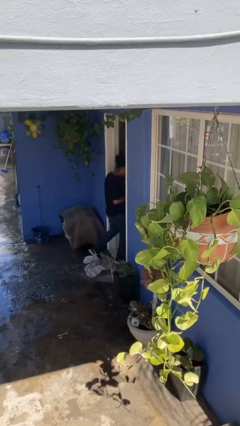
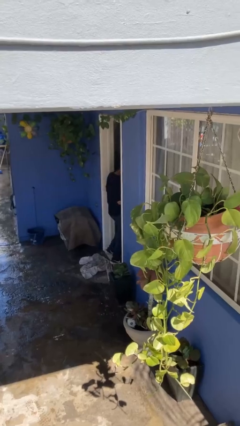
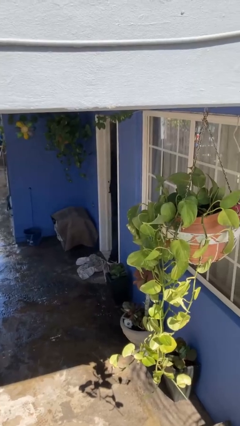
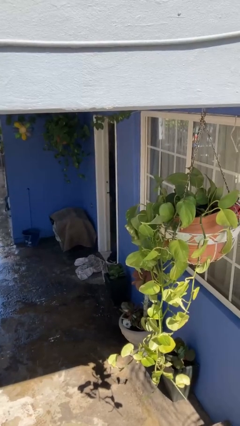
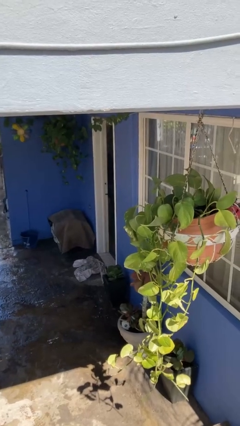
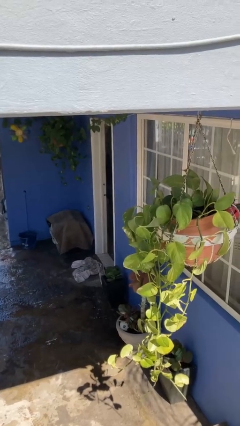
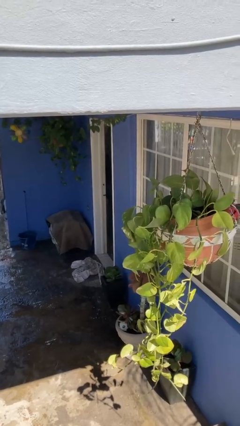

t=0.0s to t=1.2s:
person exits scene through structure

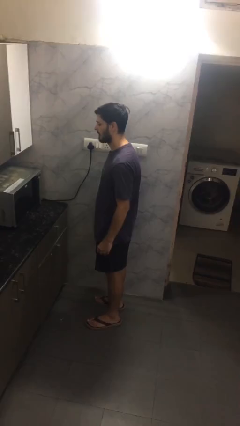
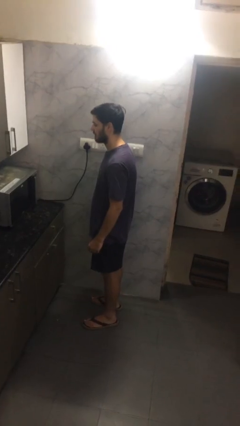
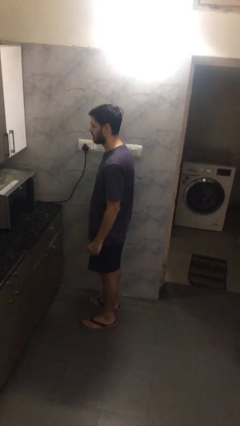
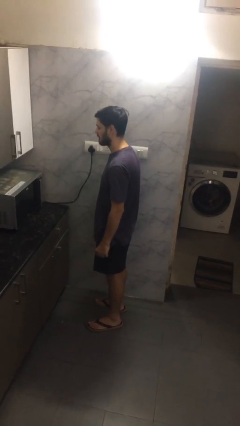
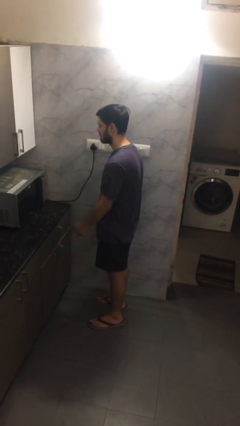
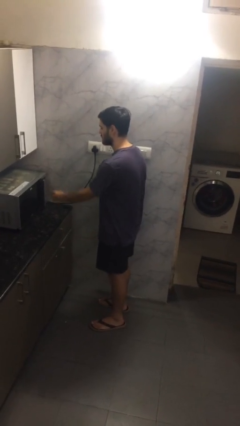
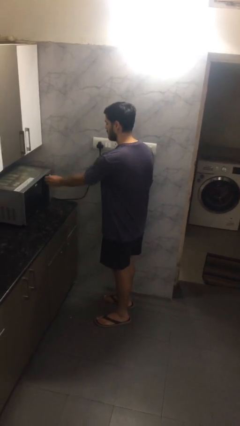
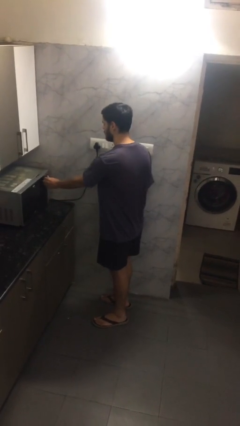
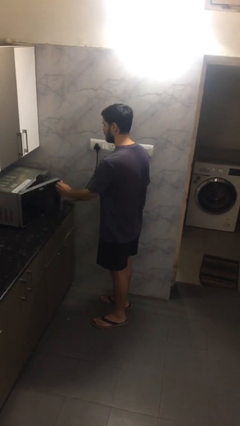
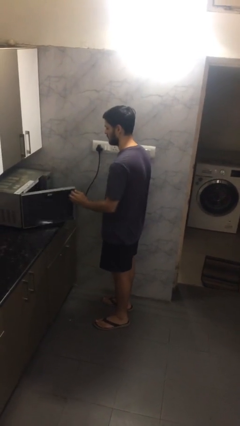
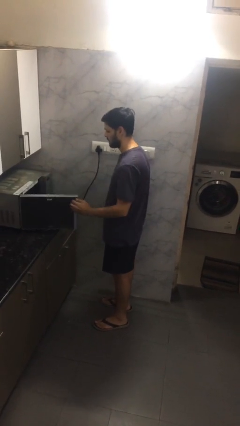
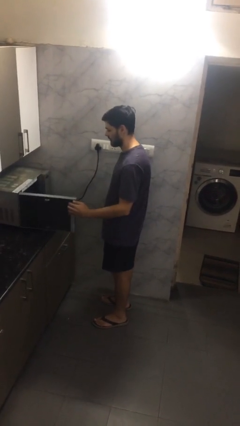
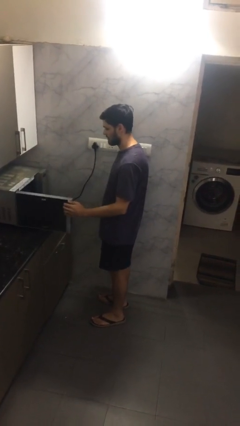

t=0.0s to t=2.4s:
person opens microwave

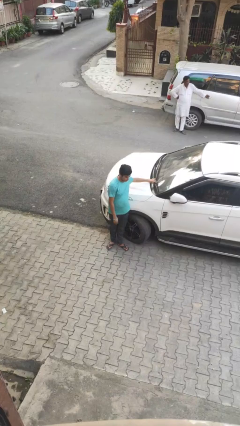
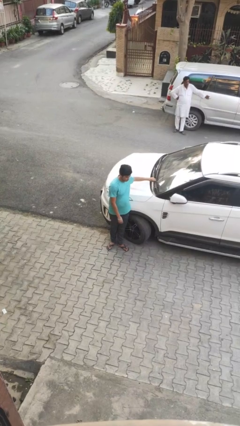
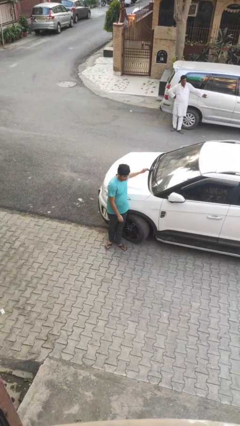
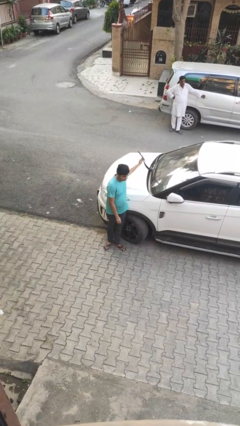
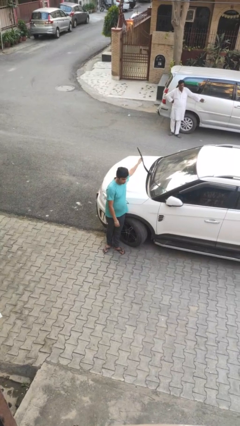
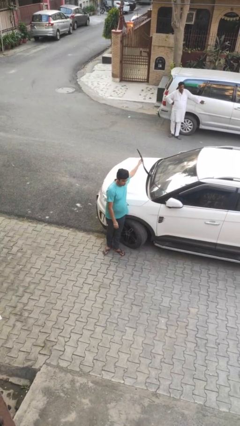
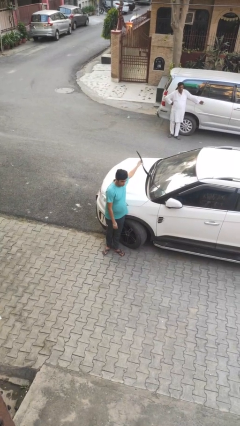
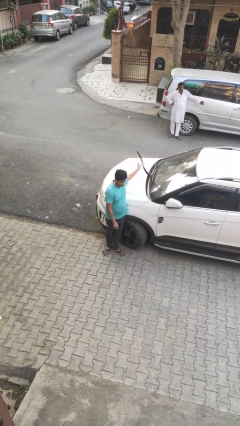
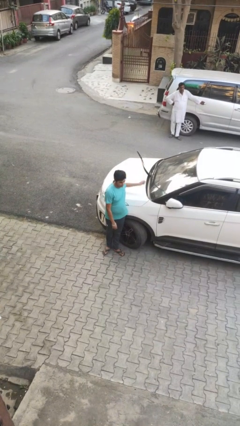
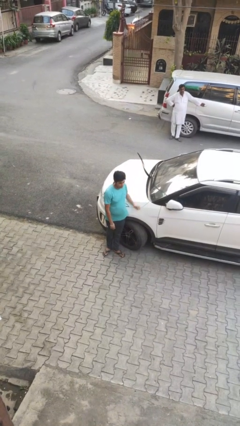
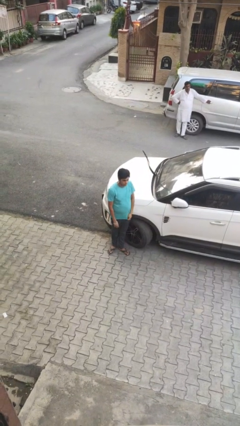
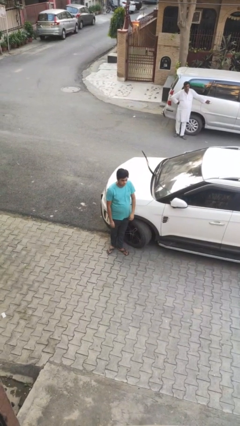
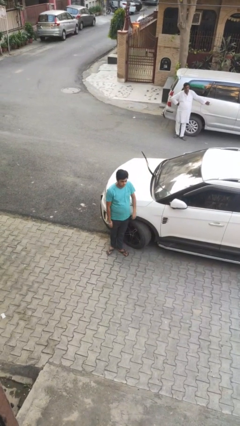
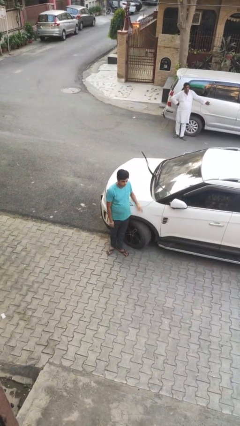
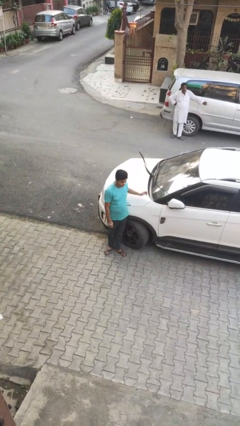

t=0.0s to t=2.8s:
person flips up car wipers

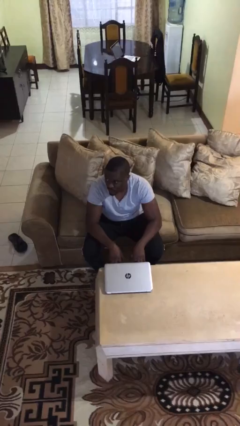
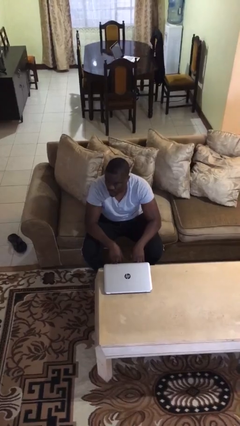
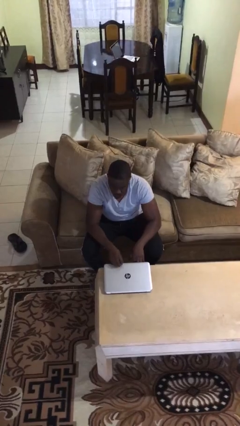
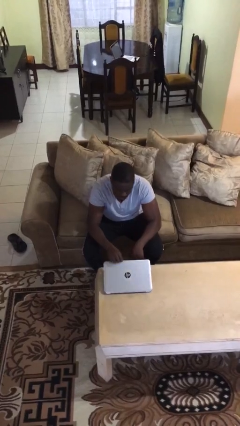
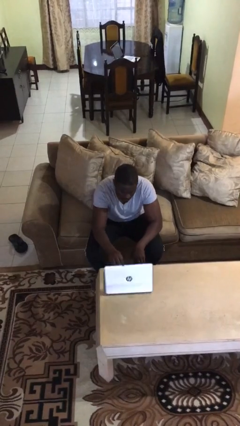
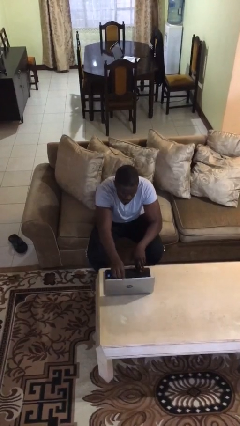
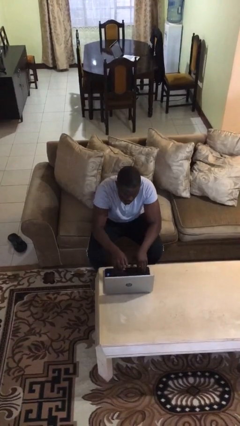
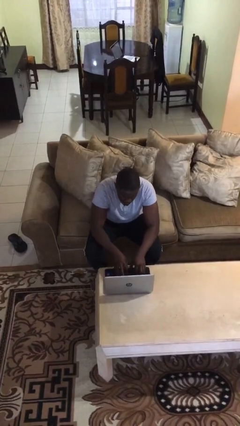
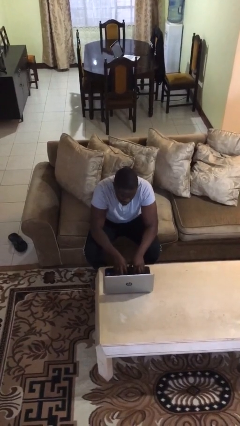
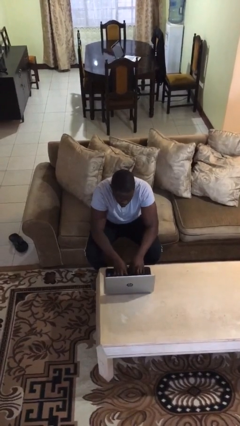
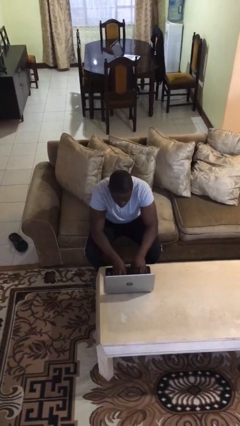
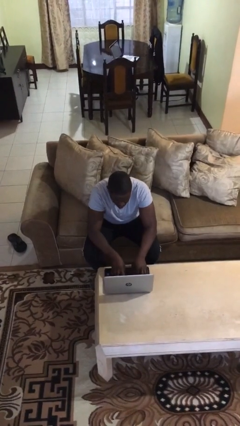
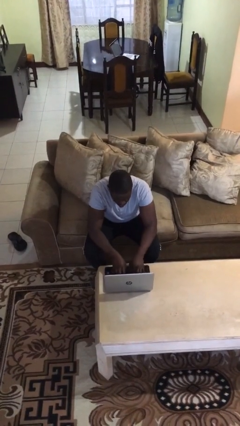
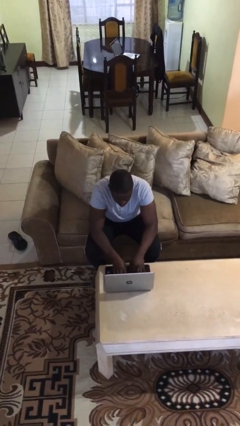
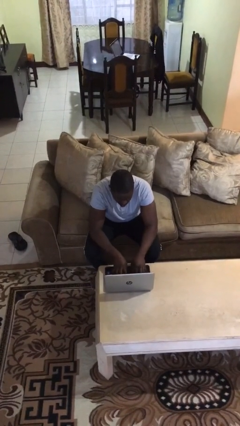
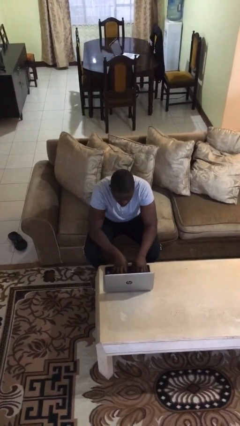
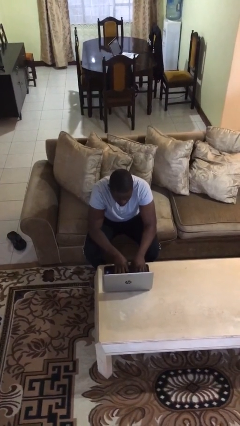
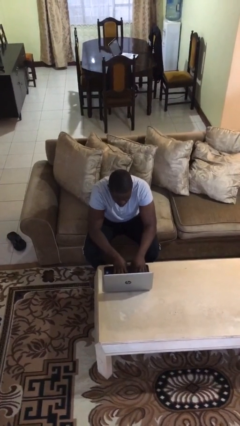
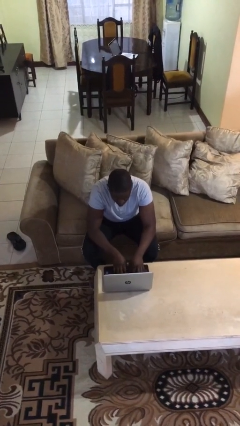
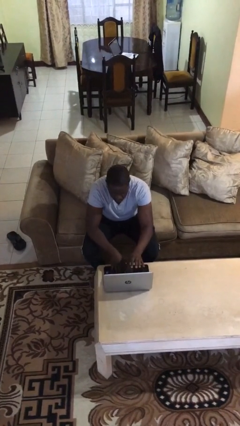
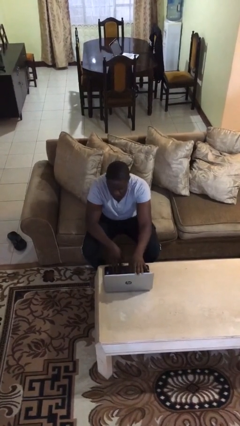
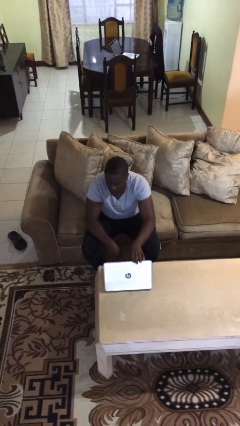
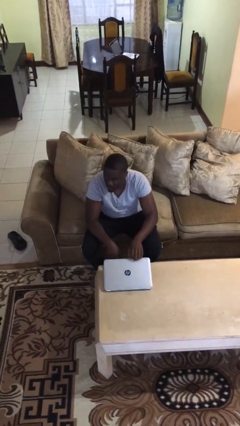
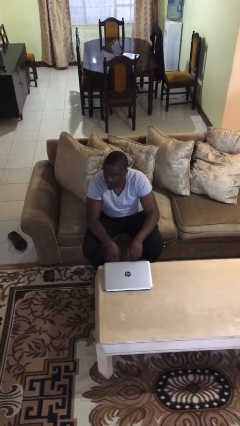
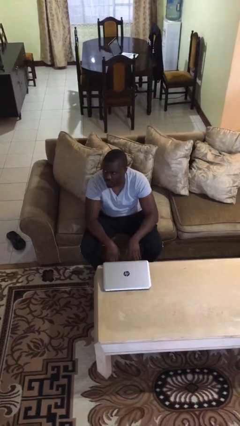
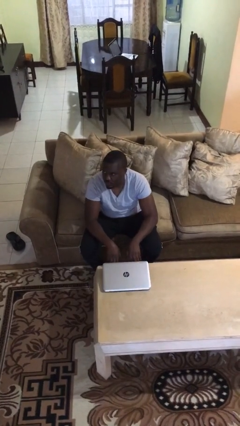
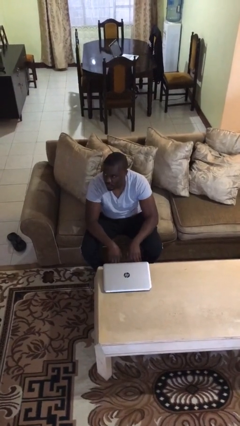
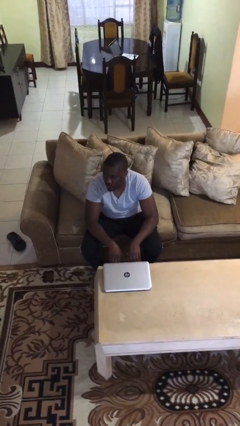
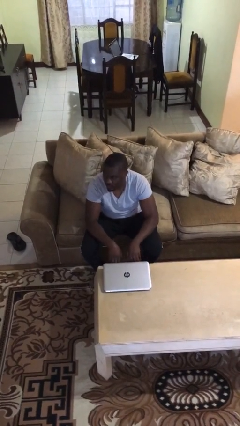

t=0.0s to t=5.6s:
person interacts with laptop

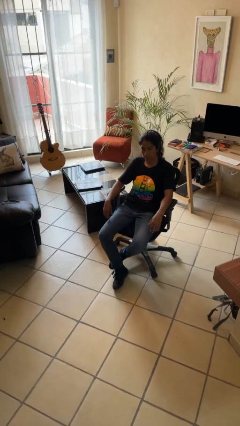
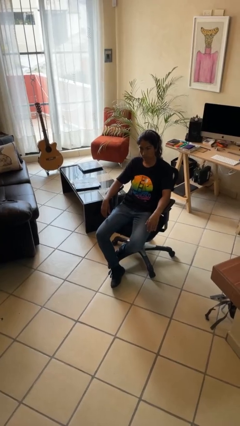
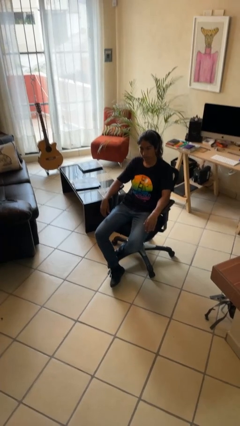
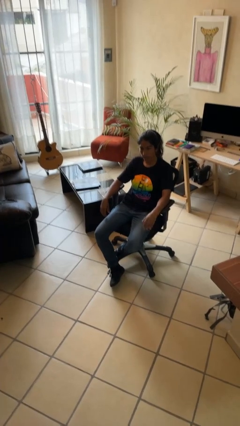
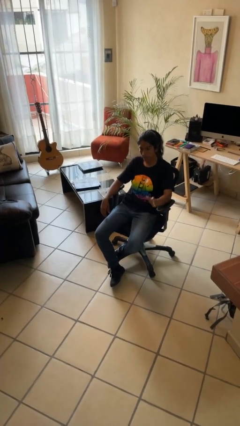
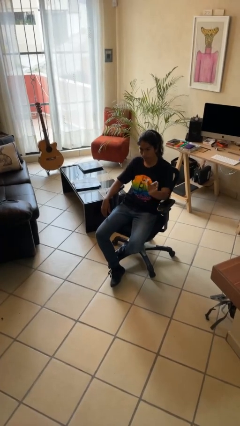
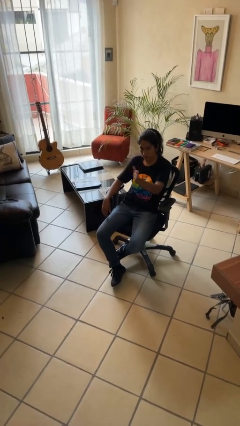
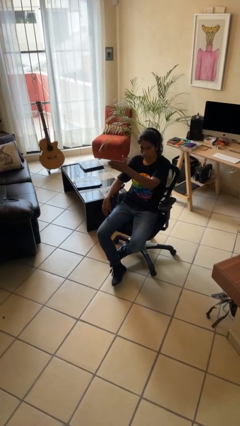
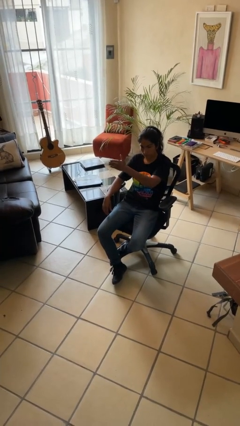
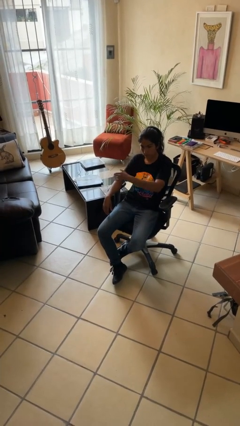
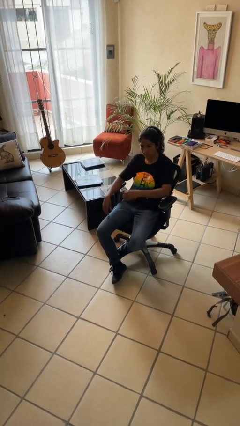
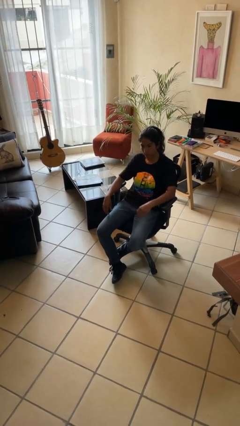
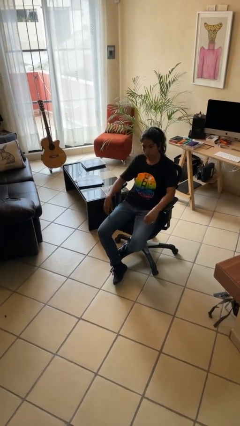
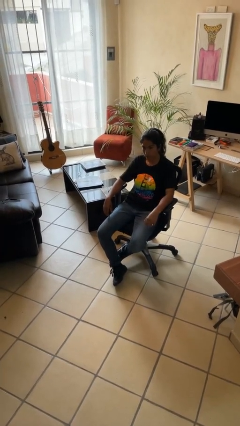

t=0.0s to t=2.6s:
person gestures swipe right

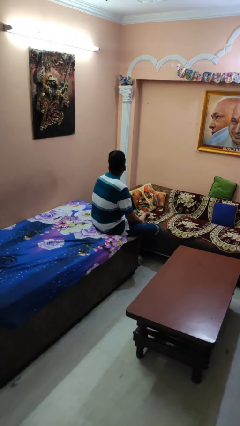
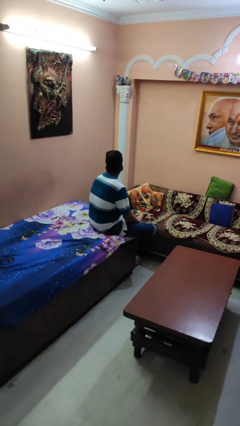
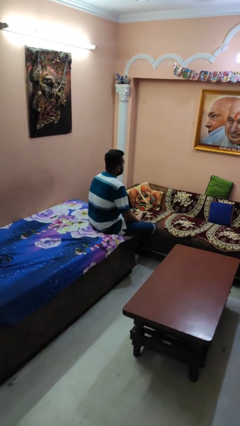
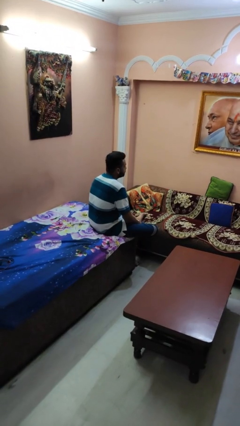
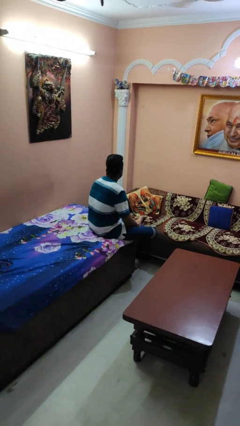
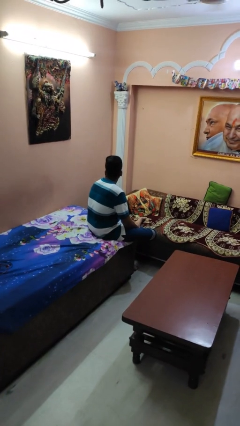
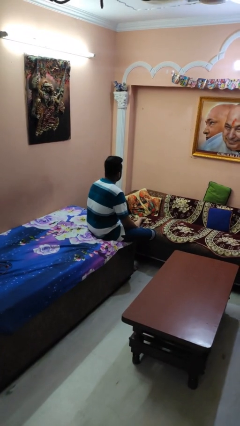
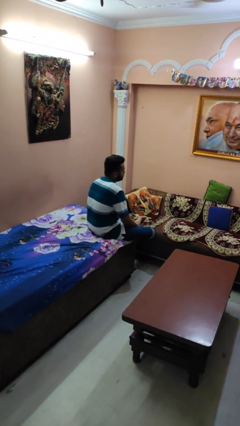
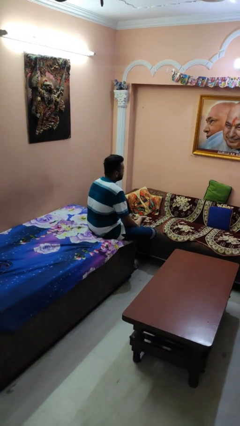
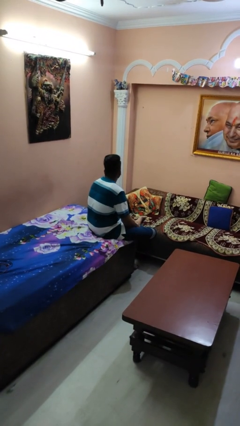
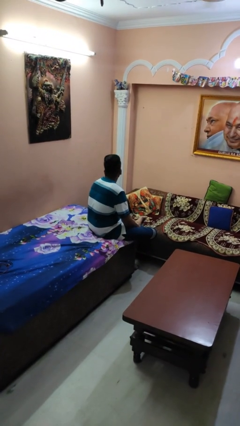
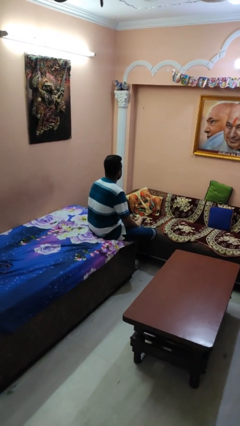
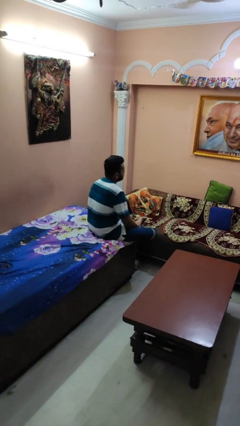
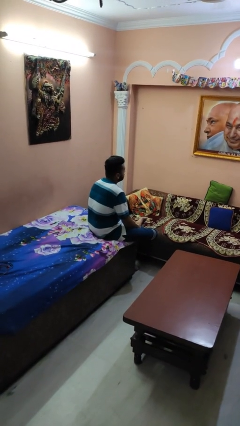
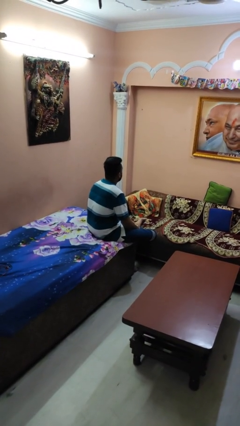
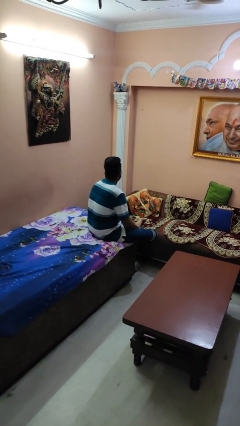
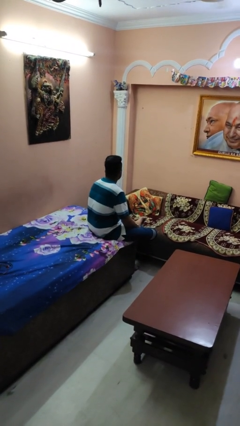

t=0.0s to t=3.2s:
person shakes head
